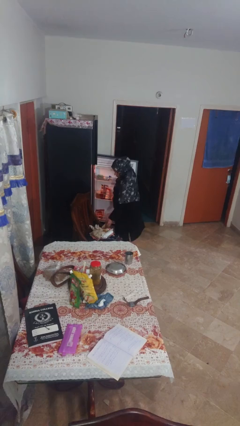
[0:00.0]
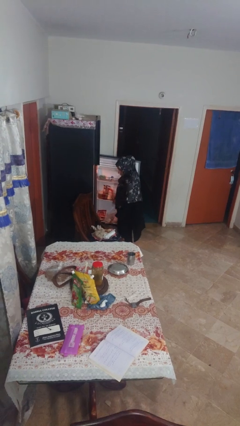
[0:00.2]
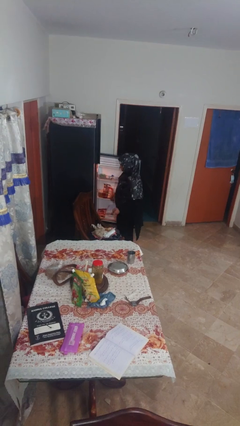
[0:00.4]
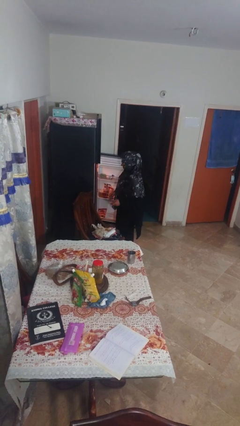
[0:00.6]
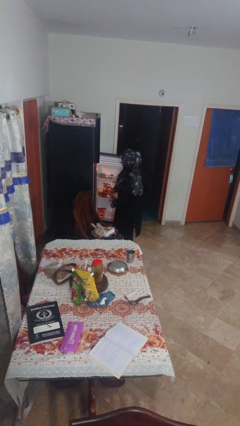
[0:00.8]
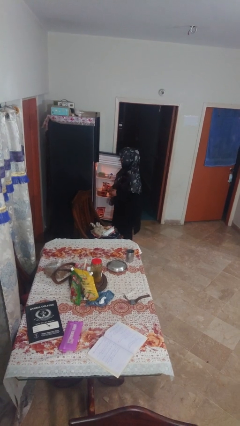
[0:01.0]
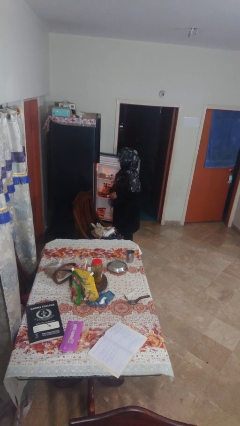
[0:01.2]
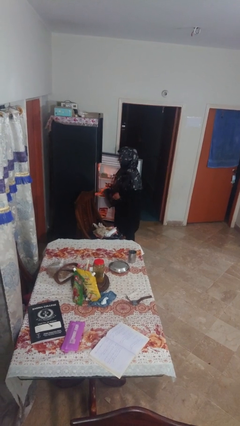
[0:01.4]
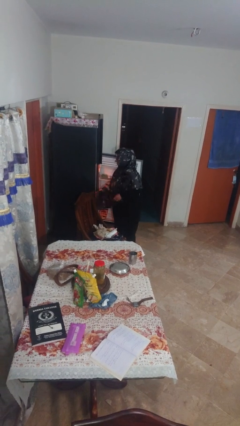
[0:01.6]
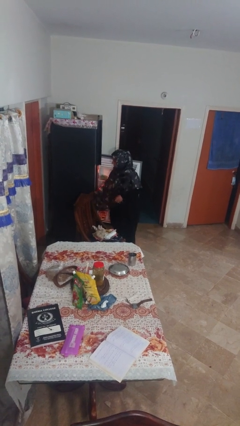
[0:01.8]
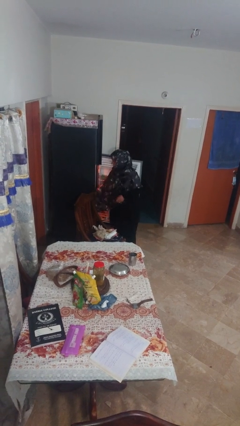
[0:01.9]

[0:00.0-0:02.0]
person loads groceries into refrigerator

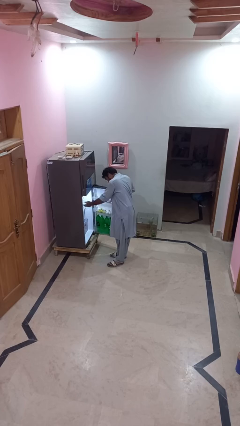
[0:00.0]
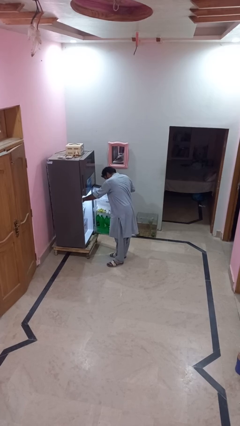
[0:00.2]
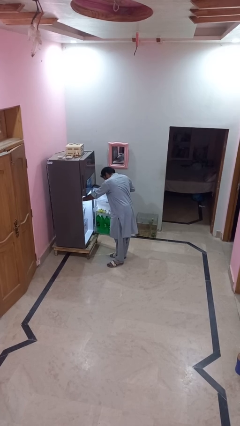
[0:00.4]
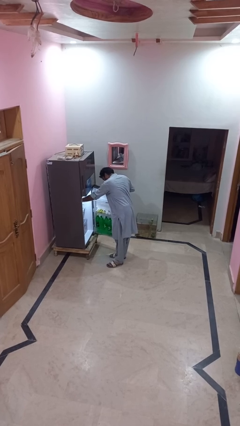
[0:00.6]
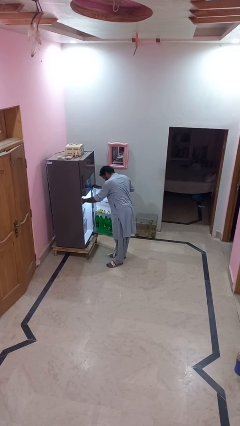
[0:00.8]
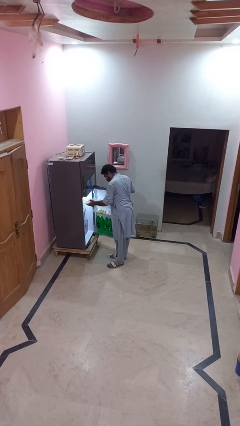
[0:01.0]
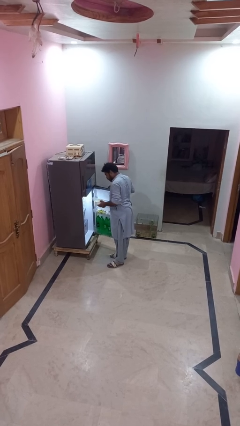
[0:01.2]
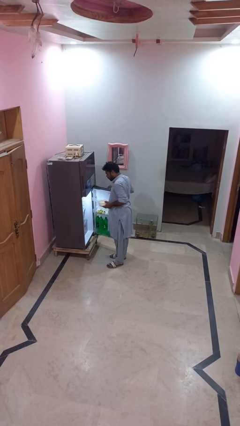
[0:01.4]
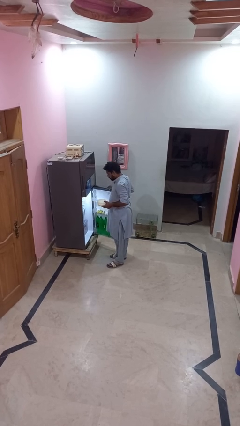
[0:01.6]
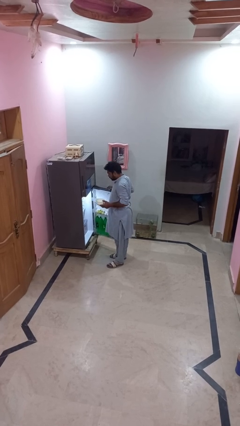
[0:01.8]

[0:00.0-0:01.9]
person takes object from refrigerator

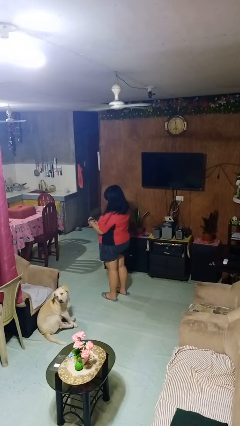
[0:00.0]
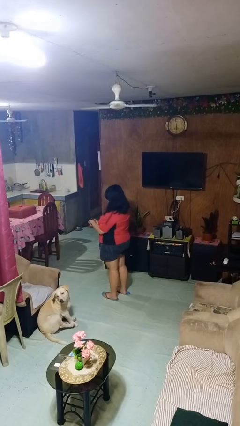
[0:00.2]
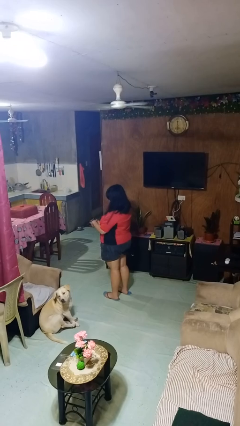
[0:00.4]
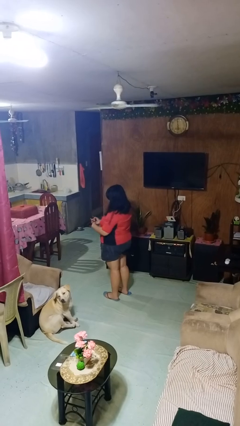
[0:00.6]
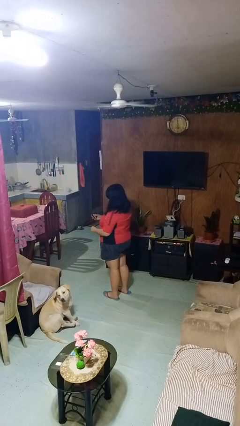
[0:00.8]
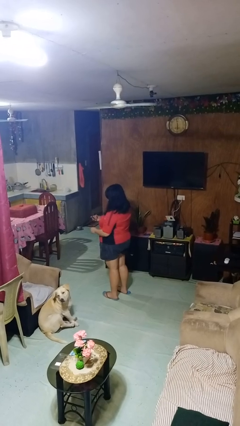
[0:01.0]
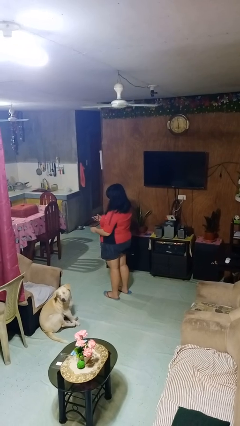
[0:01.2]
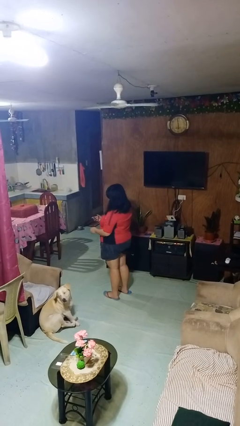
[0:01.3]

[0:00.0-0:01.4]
person takes off wristwatch

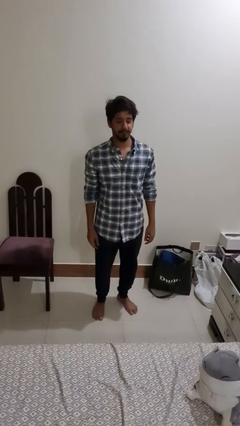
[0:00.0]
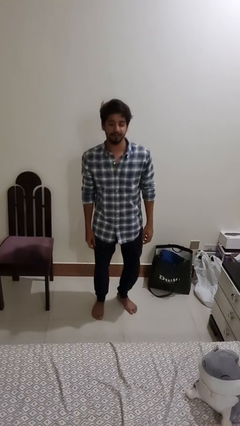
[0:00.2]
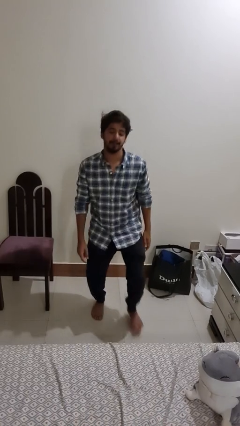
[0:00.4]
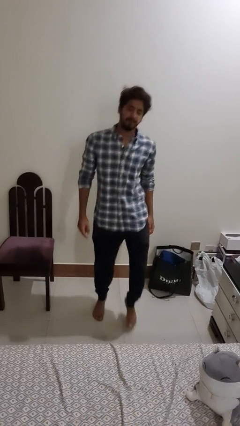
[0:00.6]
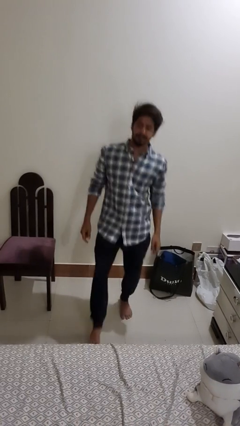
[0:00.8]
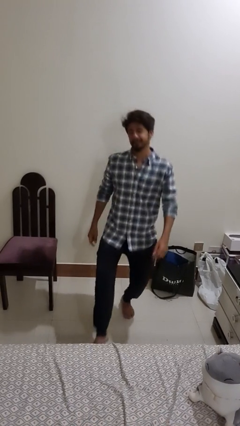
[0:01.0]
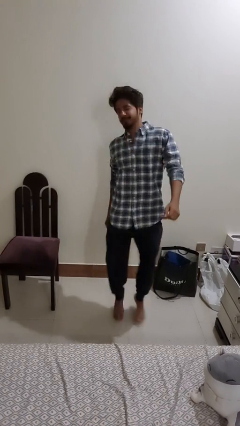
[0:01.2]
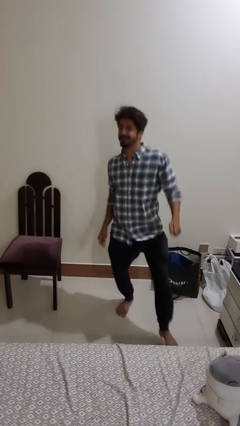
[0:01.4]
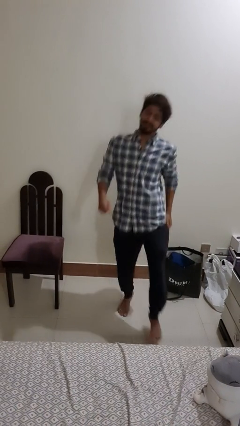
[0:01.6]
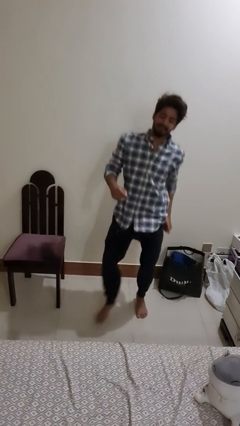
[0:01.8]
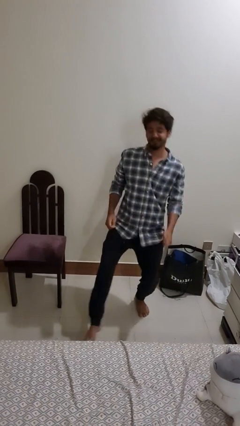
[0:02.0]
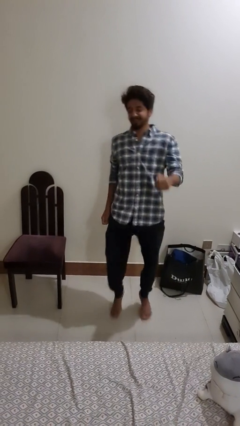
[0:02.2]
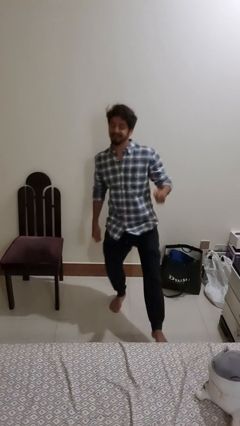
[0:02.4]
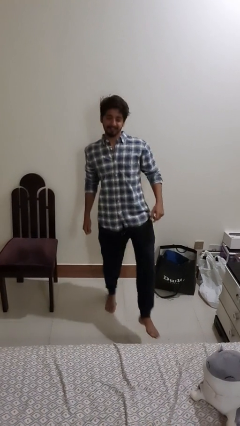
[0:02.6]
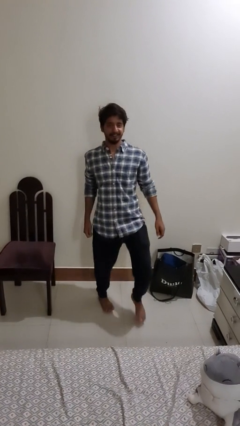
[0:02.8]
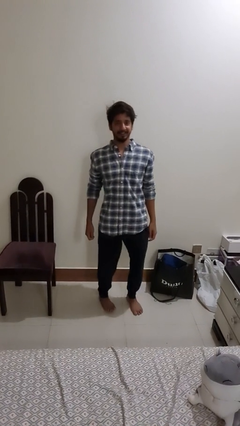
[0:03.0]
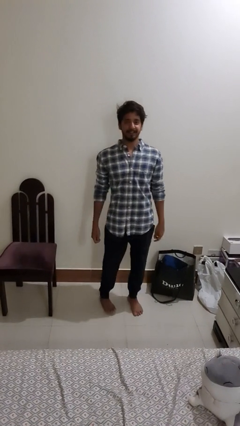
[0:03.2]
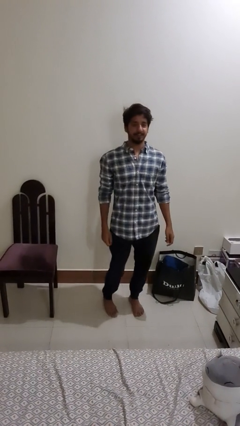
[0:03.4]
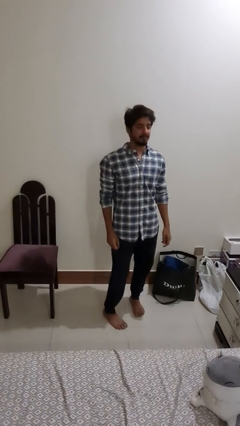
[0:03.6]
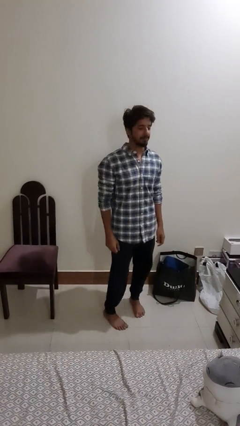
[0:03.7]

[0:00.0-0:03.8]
person dances in place

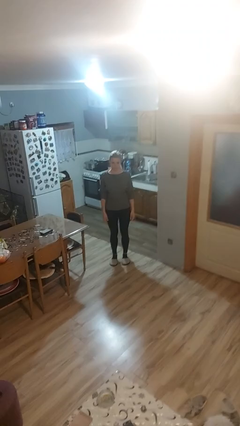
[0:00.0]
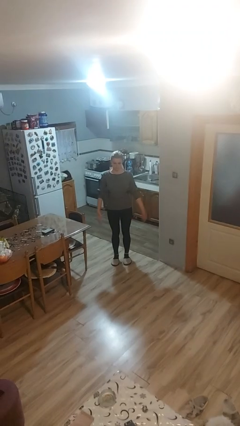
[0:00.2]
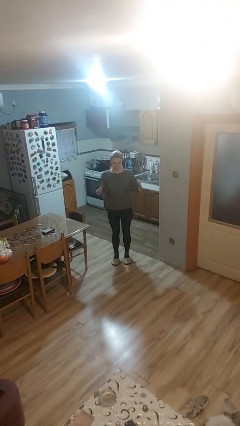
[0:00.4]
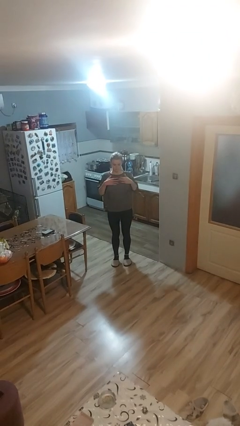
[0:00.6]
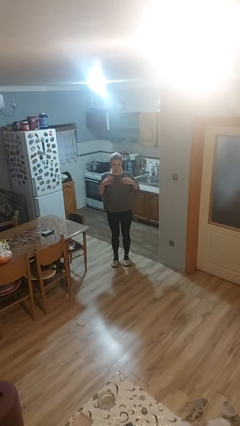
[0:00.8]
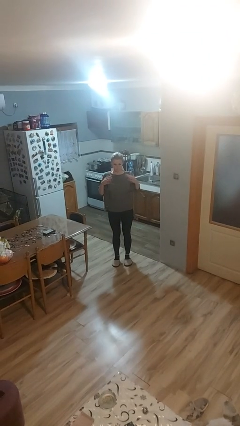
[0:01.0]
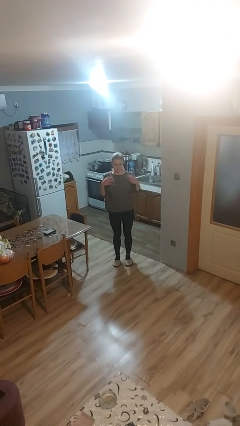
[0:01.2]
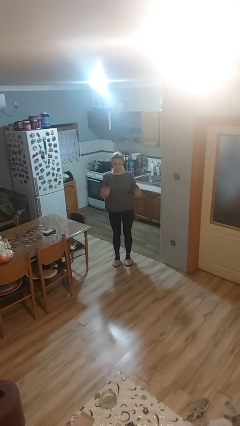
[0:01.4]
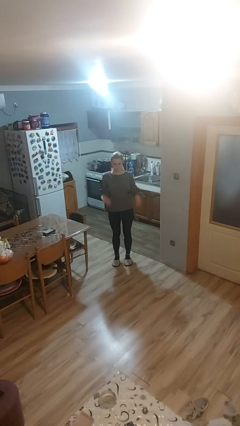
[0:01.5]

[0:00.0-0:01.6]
person drums on chest

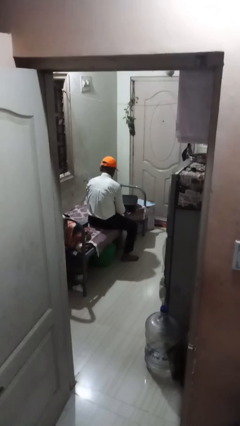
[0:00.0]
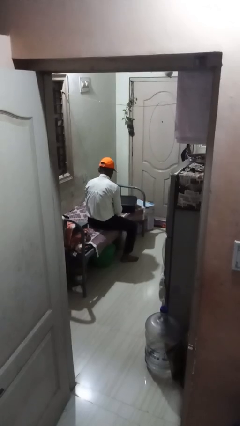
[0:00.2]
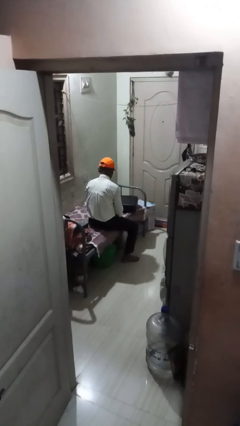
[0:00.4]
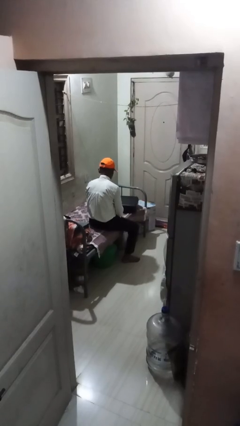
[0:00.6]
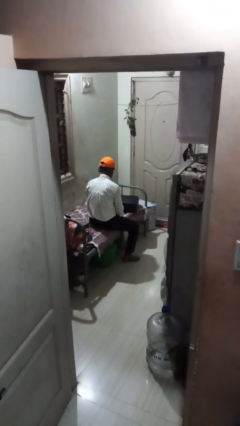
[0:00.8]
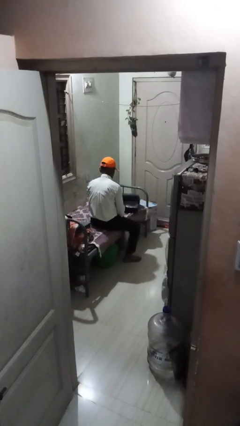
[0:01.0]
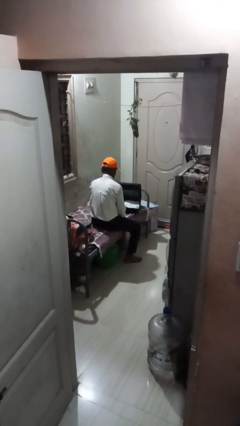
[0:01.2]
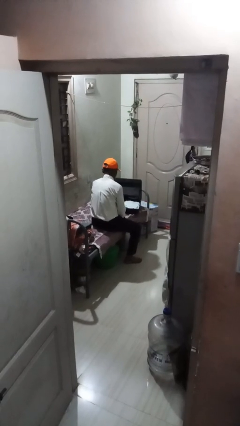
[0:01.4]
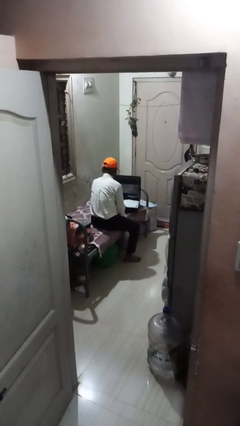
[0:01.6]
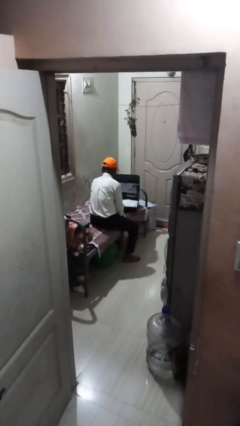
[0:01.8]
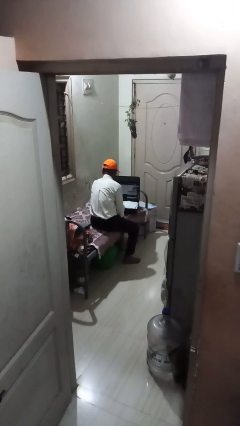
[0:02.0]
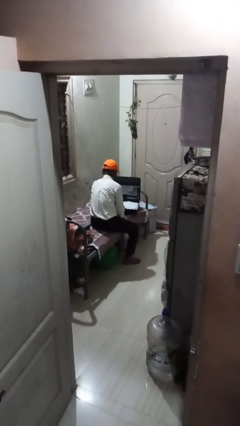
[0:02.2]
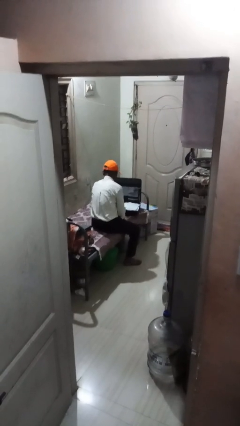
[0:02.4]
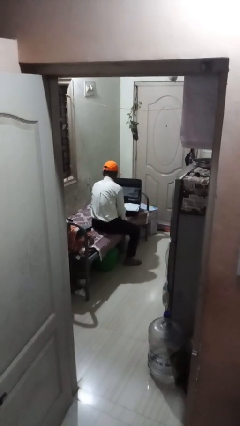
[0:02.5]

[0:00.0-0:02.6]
person opens suitcase

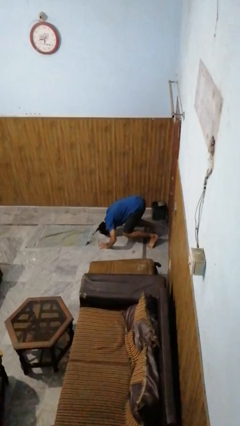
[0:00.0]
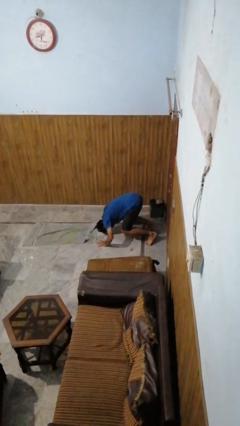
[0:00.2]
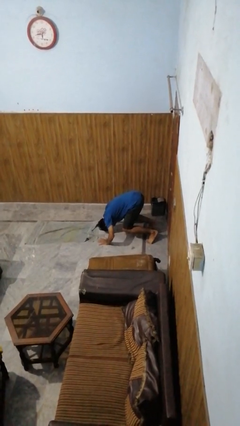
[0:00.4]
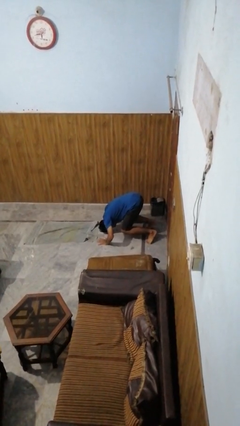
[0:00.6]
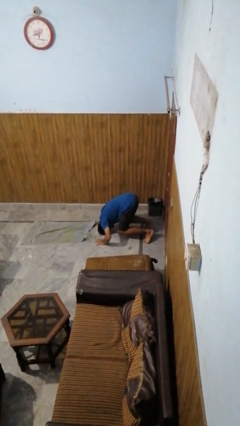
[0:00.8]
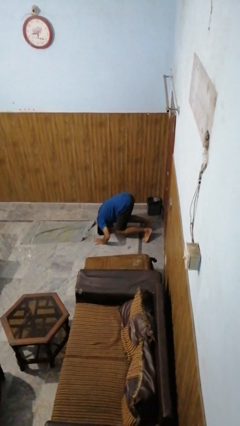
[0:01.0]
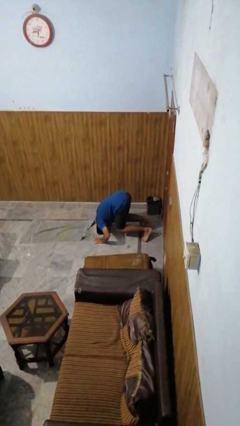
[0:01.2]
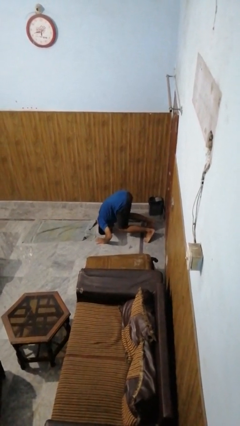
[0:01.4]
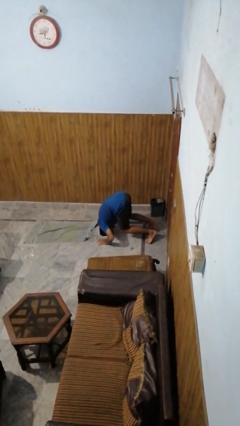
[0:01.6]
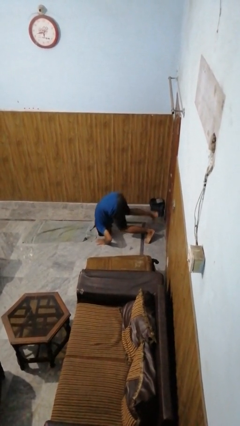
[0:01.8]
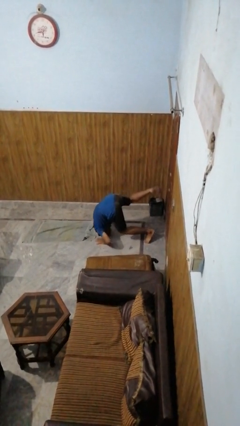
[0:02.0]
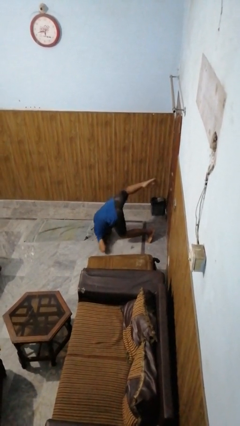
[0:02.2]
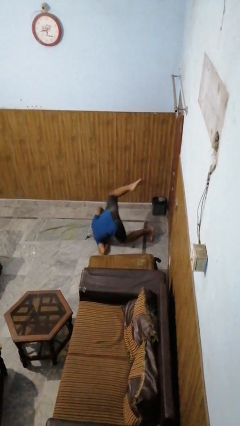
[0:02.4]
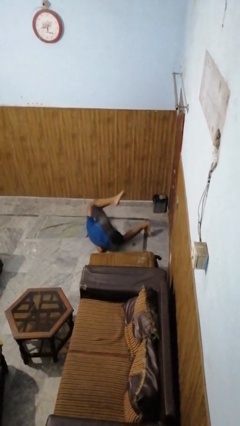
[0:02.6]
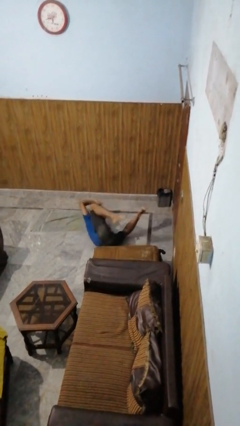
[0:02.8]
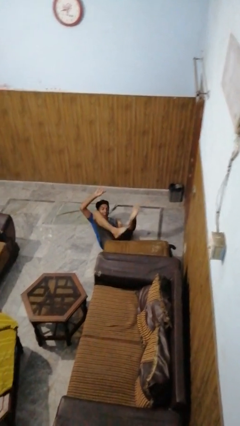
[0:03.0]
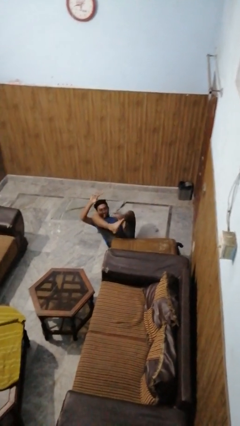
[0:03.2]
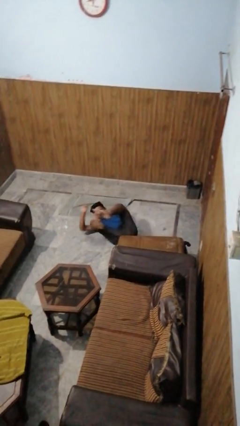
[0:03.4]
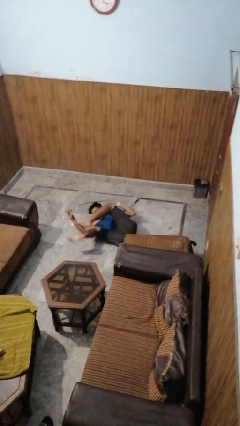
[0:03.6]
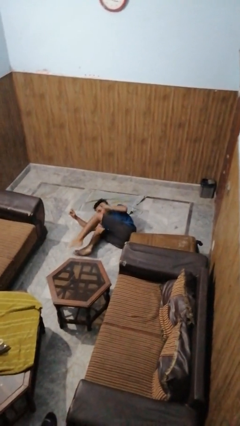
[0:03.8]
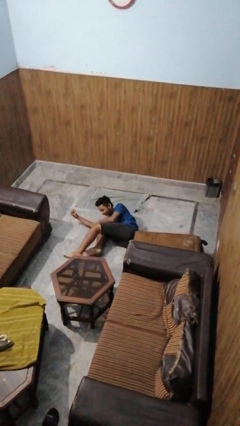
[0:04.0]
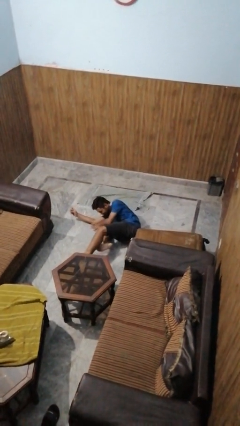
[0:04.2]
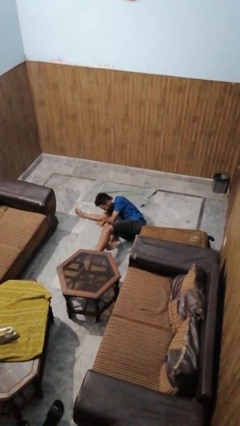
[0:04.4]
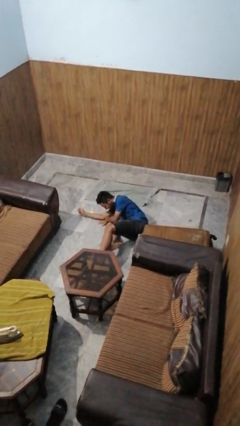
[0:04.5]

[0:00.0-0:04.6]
person somersaults
